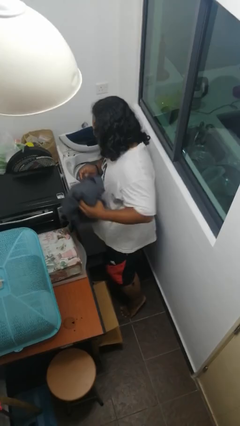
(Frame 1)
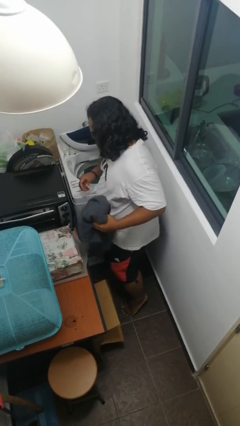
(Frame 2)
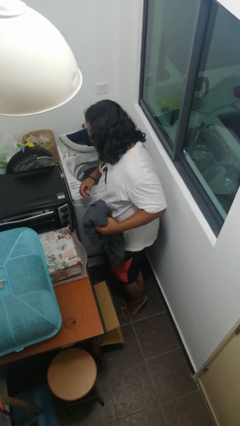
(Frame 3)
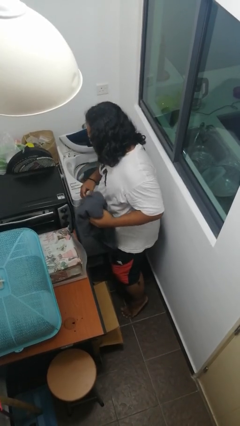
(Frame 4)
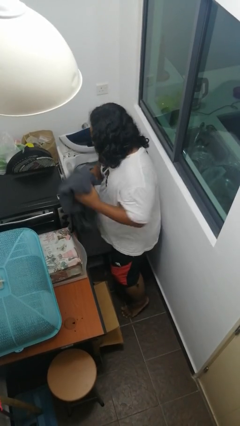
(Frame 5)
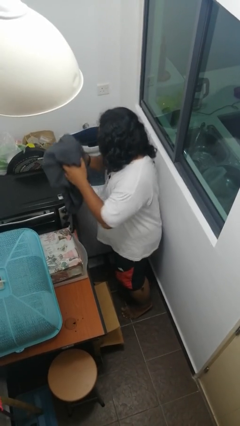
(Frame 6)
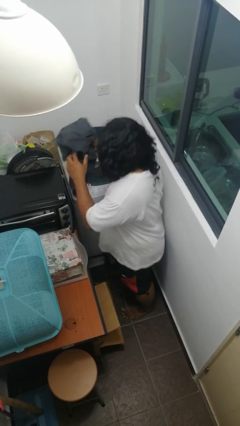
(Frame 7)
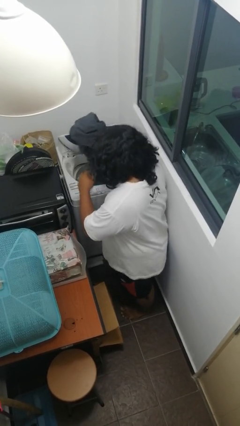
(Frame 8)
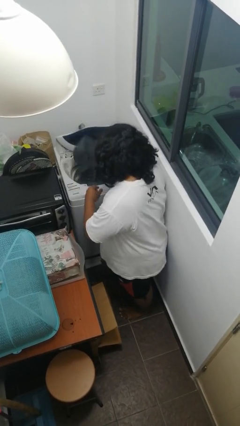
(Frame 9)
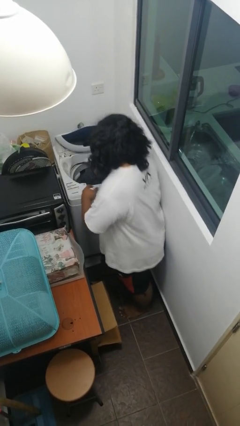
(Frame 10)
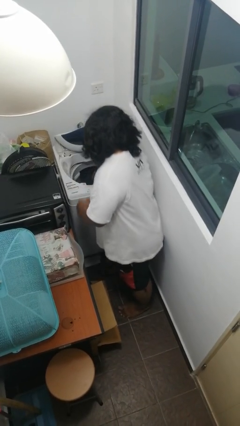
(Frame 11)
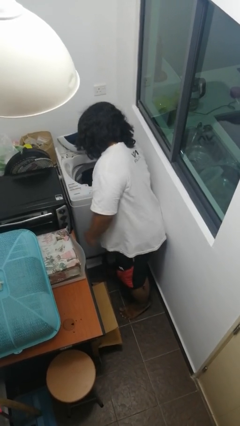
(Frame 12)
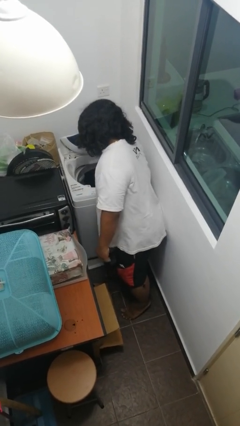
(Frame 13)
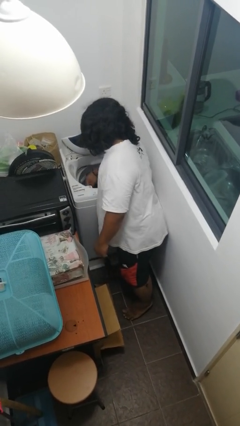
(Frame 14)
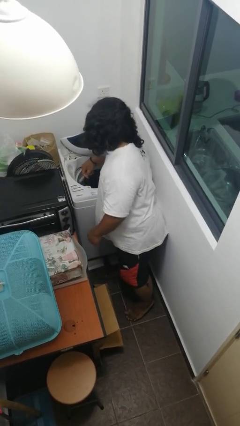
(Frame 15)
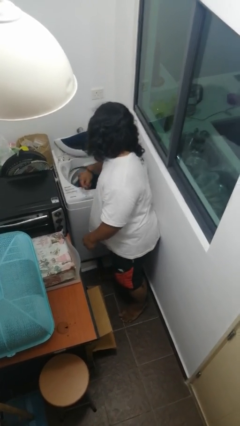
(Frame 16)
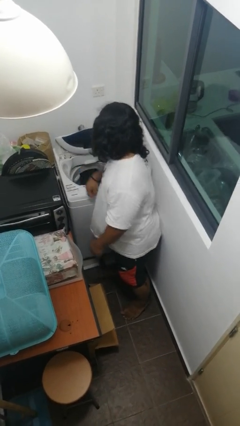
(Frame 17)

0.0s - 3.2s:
person loads clotheswasher

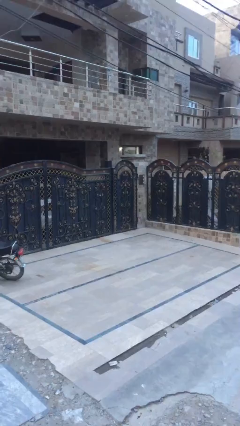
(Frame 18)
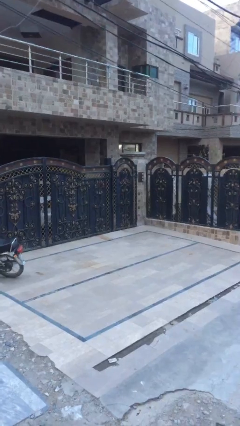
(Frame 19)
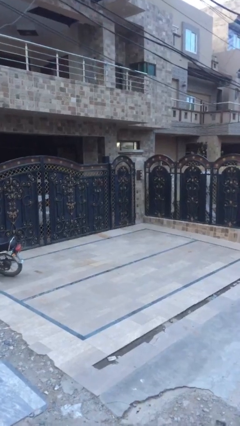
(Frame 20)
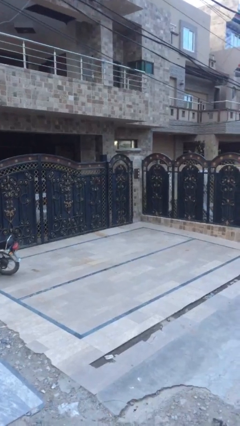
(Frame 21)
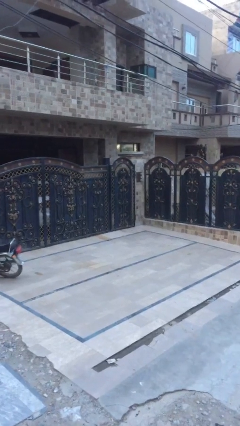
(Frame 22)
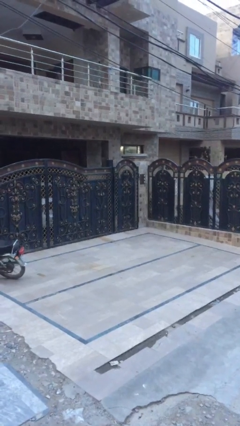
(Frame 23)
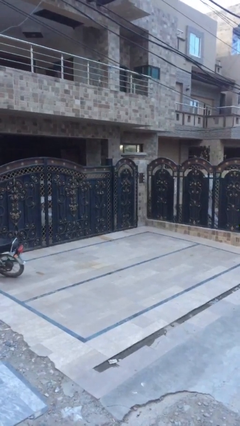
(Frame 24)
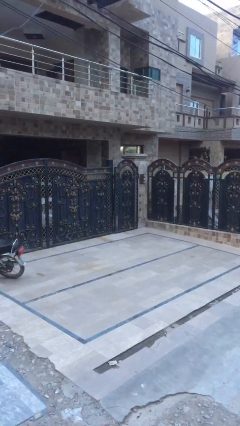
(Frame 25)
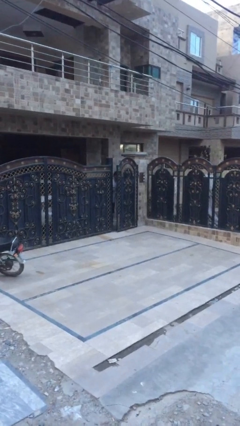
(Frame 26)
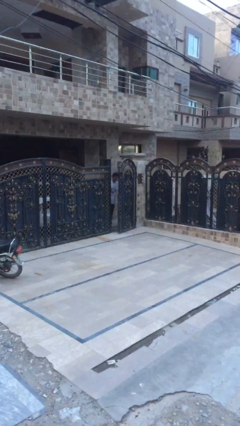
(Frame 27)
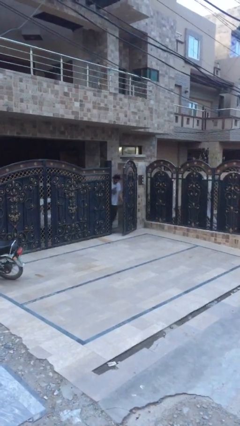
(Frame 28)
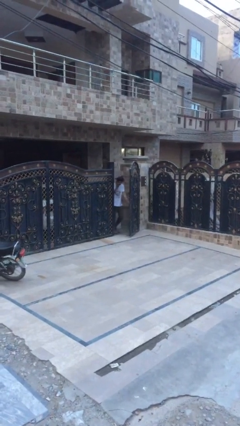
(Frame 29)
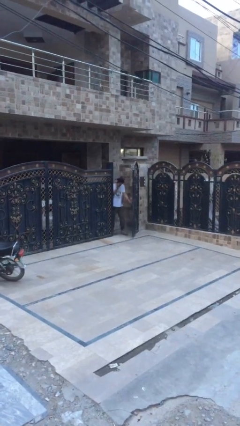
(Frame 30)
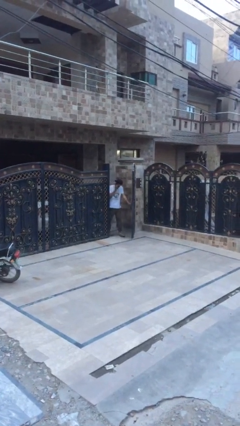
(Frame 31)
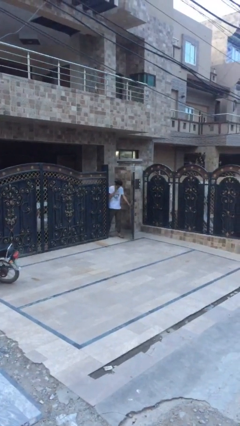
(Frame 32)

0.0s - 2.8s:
person opens facility door

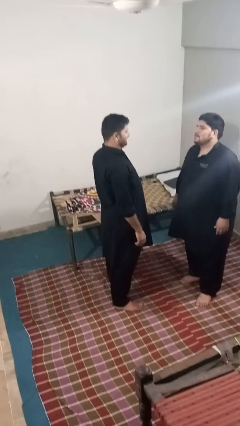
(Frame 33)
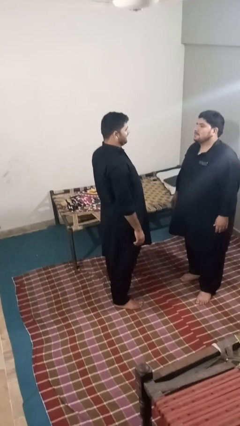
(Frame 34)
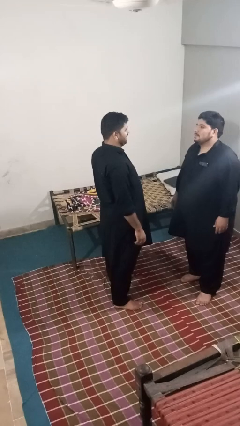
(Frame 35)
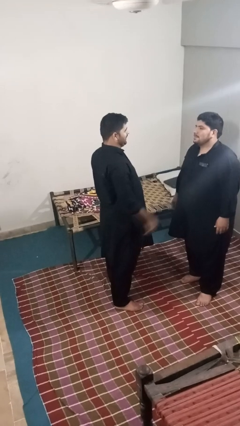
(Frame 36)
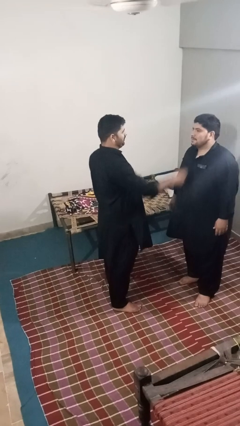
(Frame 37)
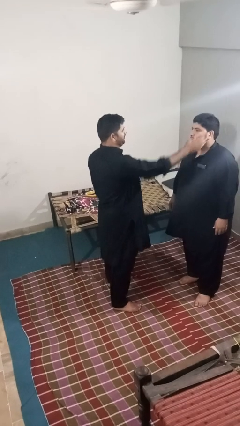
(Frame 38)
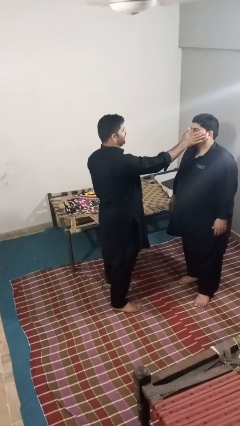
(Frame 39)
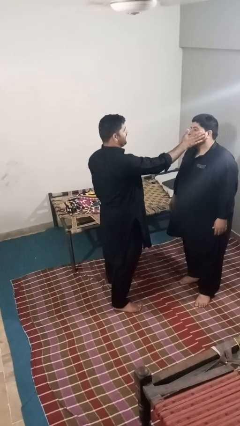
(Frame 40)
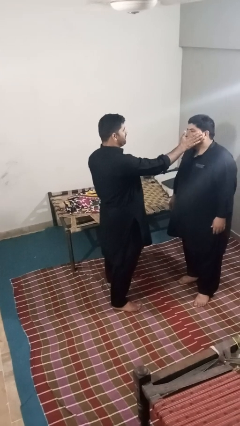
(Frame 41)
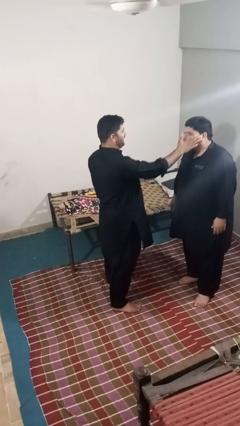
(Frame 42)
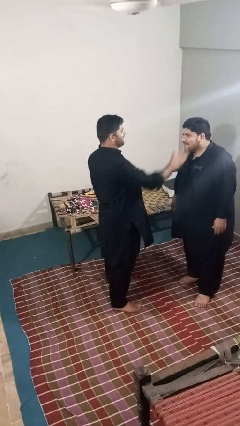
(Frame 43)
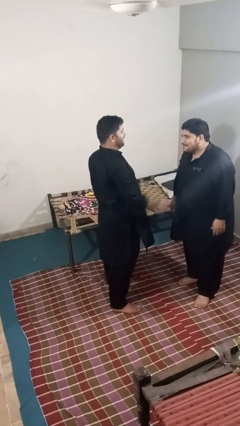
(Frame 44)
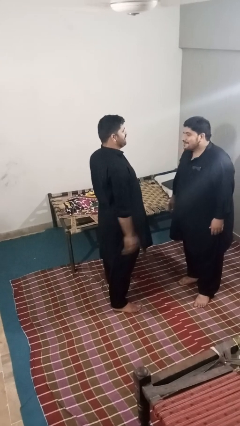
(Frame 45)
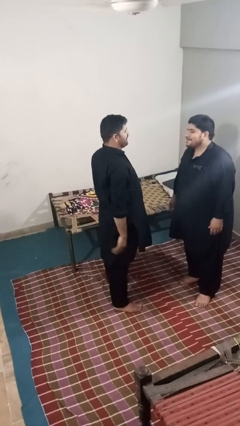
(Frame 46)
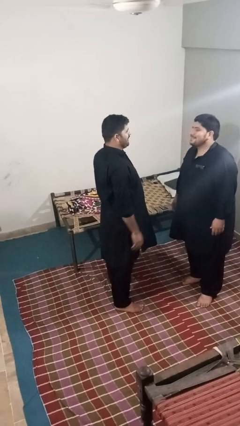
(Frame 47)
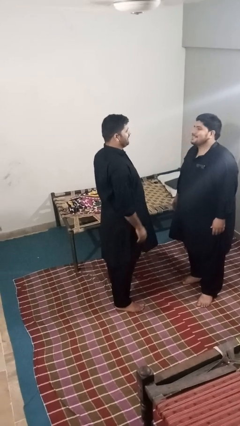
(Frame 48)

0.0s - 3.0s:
person touches face of person

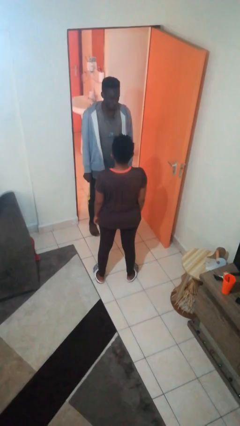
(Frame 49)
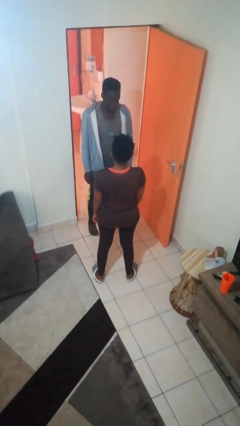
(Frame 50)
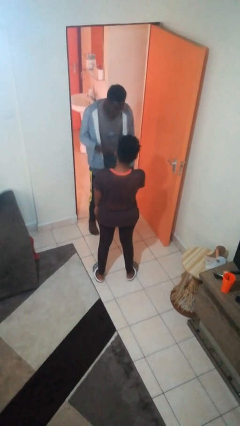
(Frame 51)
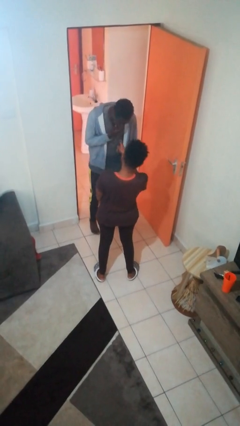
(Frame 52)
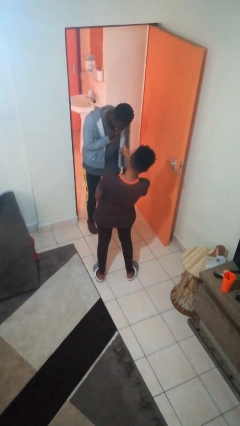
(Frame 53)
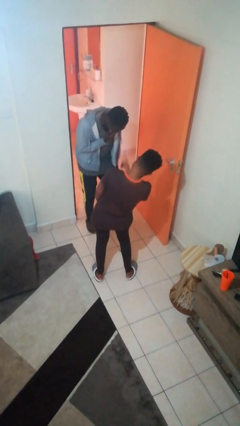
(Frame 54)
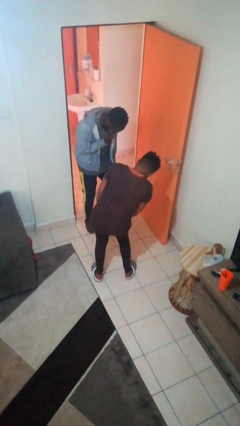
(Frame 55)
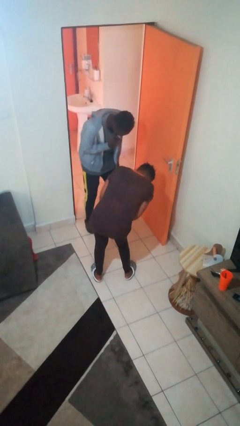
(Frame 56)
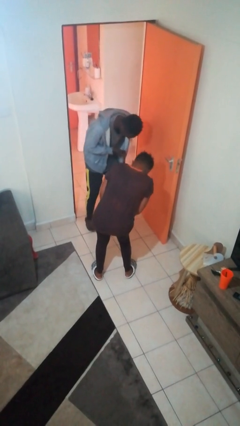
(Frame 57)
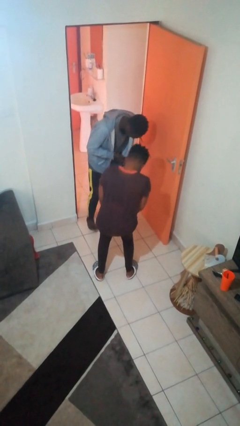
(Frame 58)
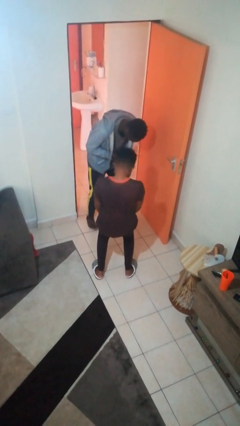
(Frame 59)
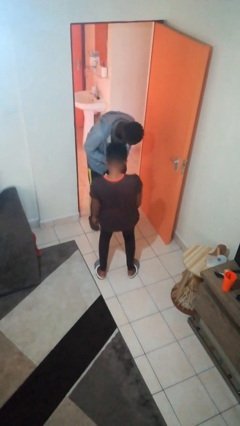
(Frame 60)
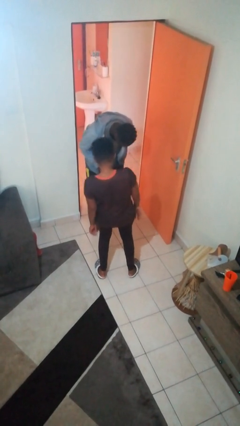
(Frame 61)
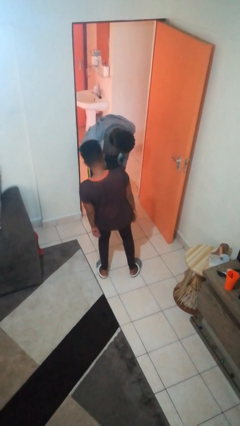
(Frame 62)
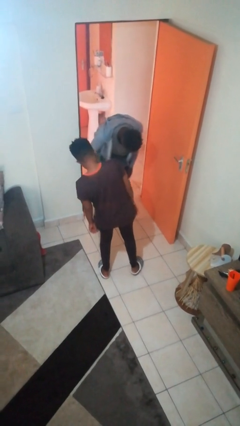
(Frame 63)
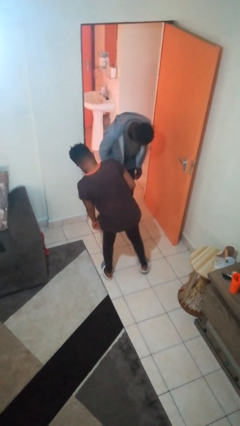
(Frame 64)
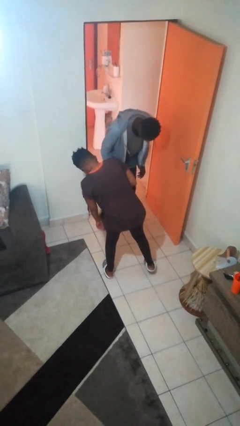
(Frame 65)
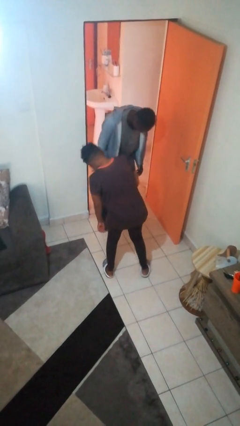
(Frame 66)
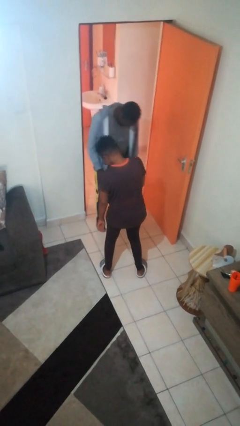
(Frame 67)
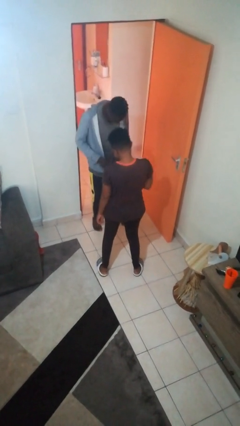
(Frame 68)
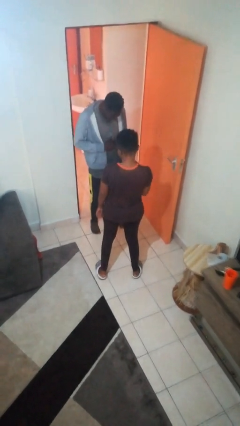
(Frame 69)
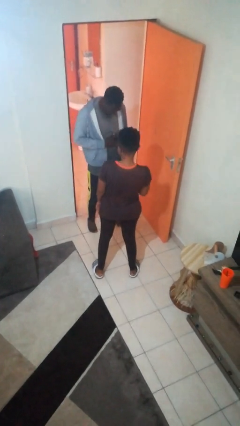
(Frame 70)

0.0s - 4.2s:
person laughs with person

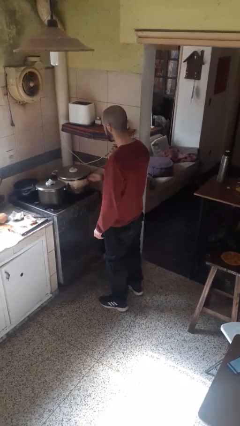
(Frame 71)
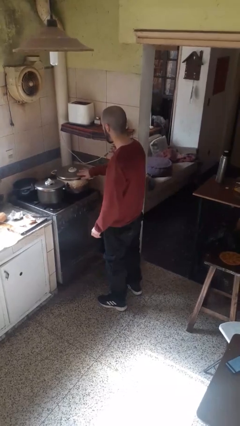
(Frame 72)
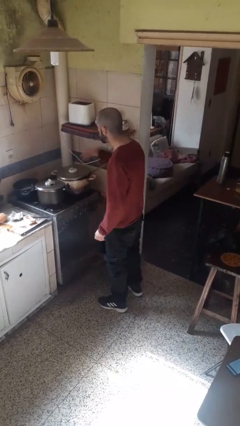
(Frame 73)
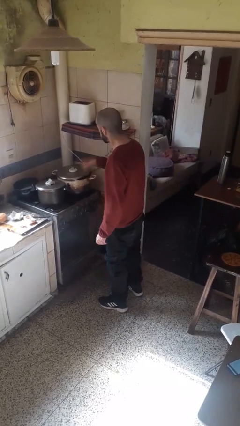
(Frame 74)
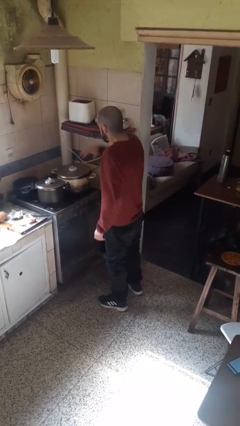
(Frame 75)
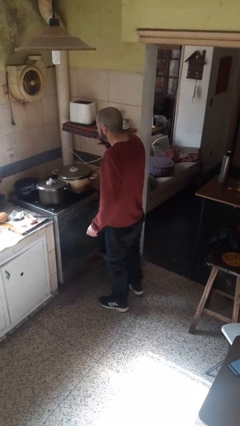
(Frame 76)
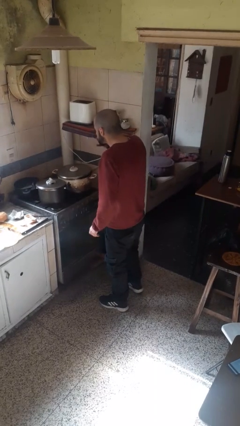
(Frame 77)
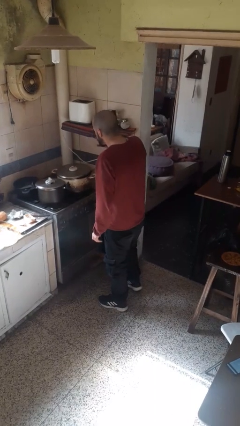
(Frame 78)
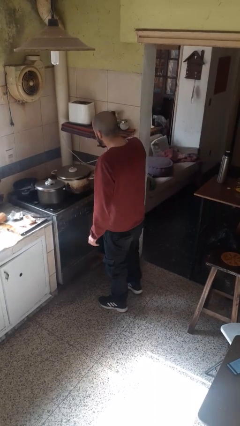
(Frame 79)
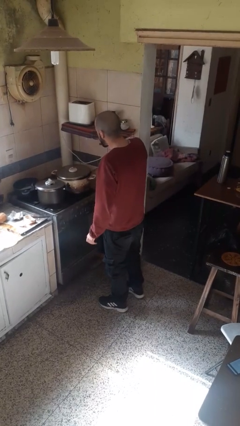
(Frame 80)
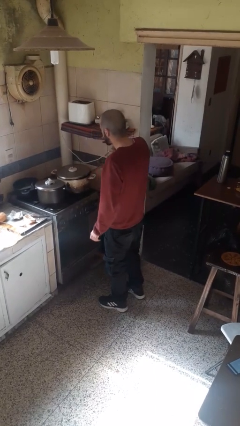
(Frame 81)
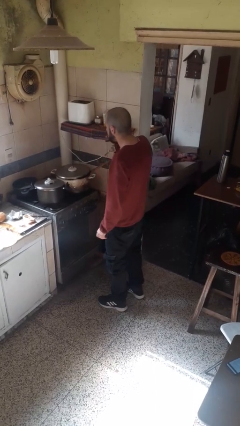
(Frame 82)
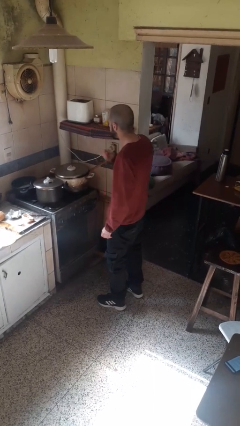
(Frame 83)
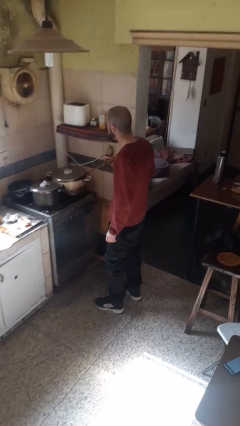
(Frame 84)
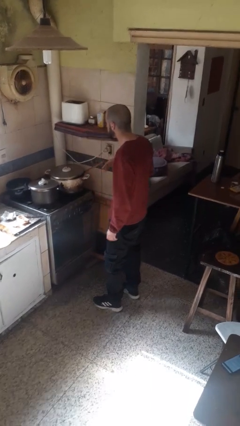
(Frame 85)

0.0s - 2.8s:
person burns hand

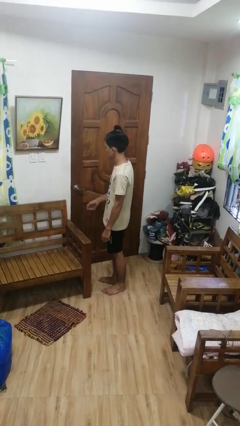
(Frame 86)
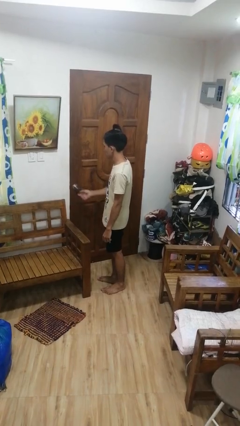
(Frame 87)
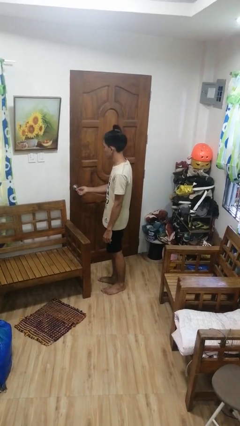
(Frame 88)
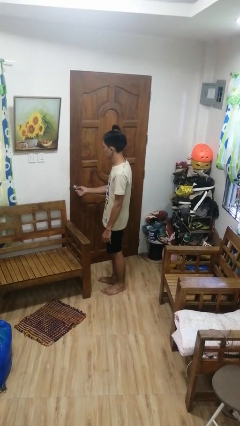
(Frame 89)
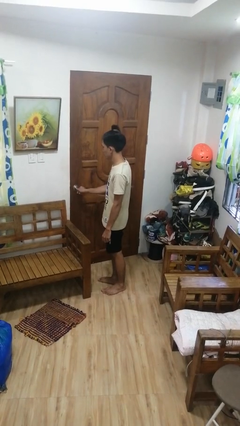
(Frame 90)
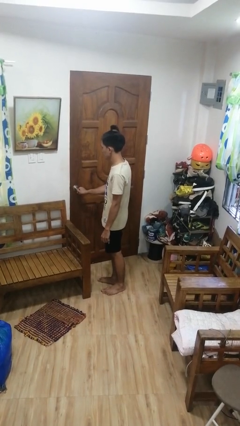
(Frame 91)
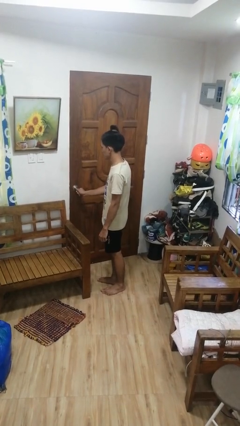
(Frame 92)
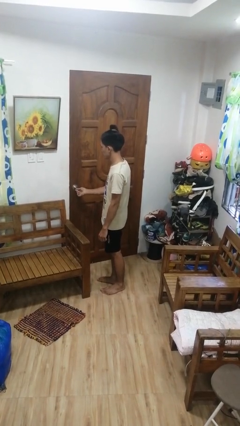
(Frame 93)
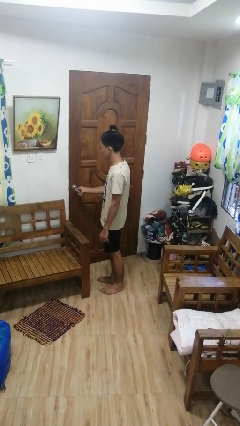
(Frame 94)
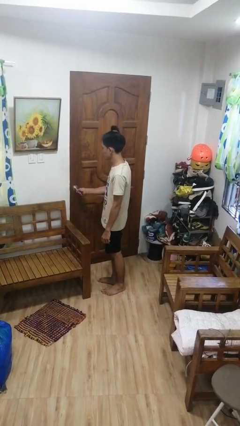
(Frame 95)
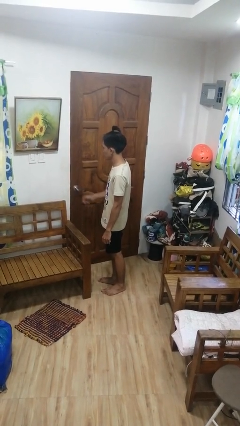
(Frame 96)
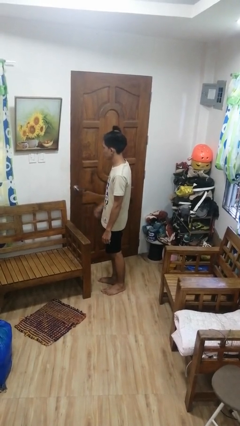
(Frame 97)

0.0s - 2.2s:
person locks door with keys
